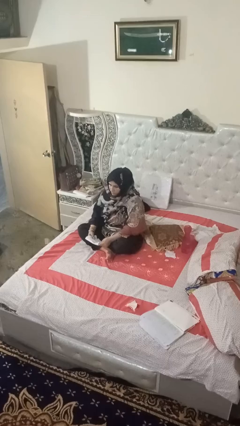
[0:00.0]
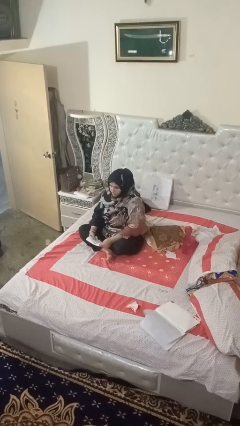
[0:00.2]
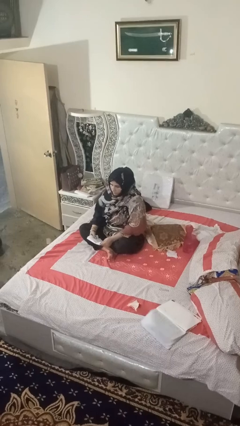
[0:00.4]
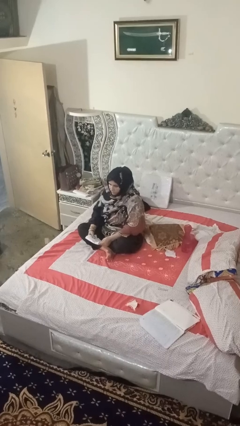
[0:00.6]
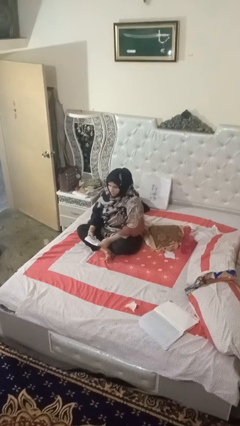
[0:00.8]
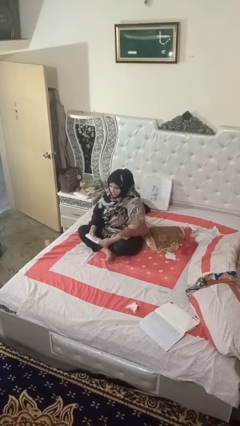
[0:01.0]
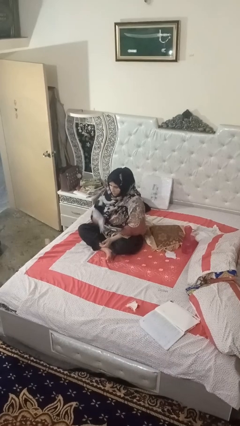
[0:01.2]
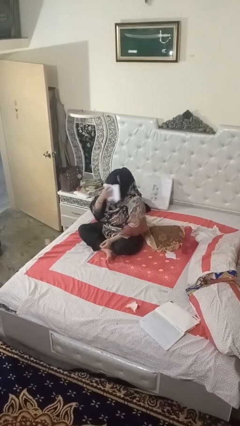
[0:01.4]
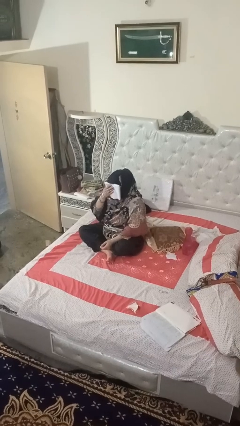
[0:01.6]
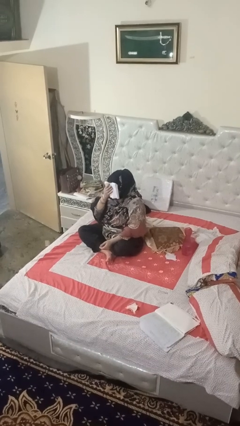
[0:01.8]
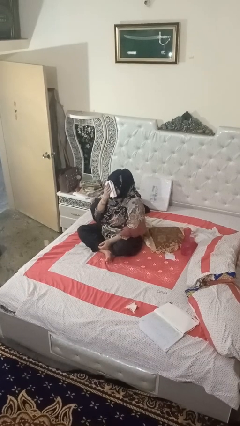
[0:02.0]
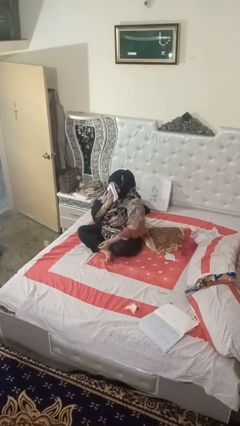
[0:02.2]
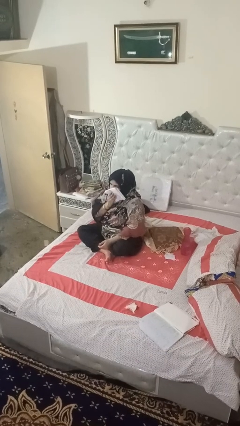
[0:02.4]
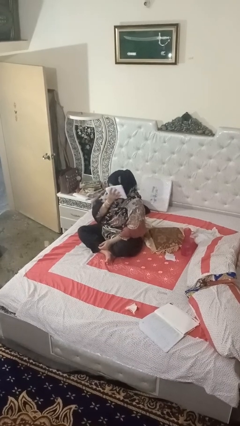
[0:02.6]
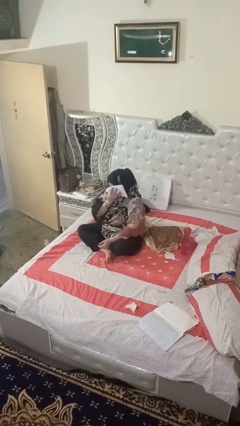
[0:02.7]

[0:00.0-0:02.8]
person wipes mouth with napkin

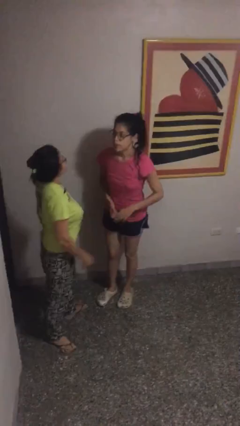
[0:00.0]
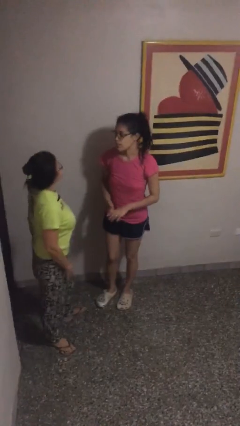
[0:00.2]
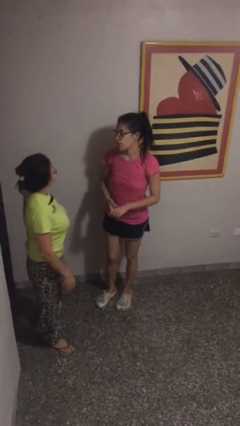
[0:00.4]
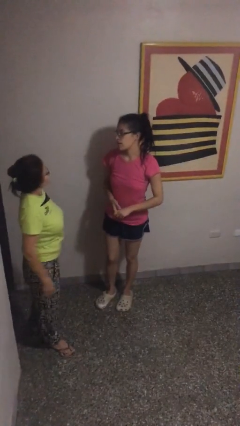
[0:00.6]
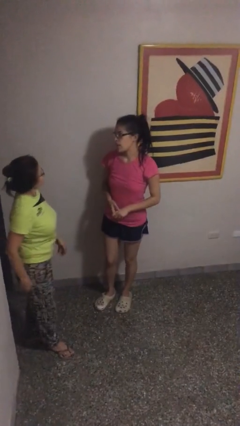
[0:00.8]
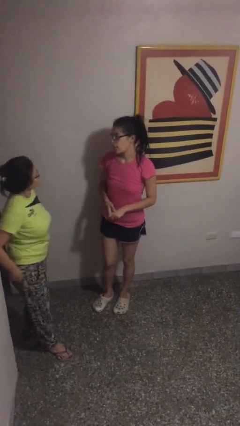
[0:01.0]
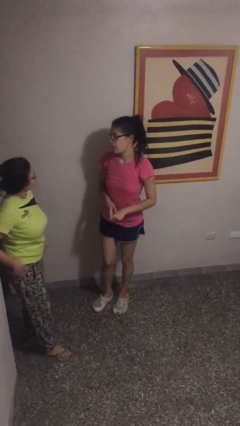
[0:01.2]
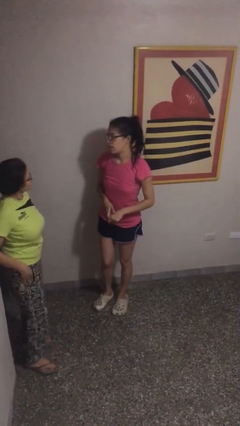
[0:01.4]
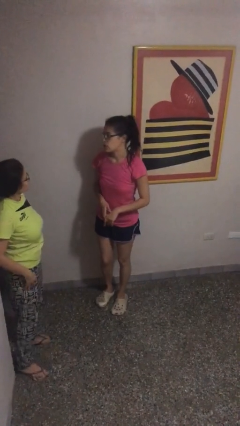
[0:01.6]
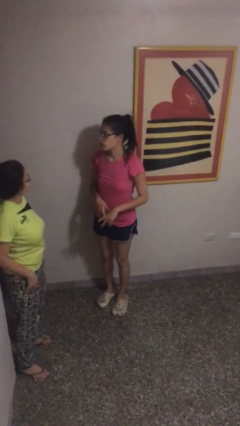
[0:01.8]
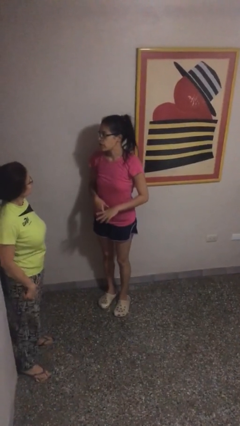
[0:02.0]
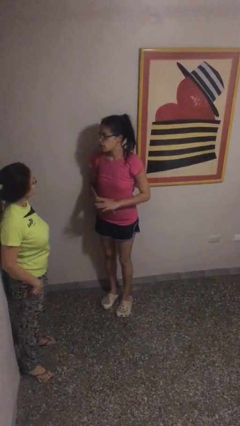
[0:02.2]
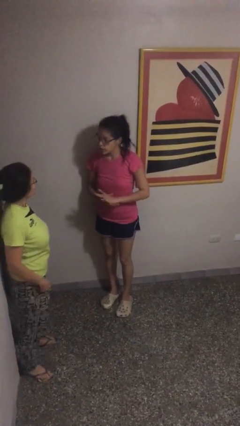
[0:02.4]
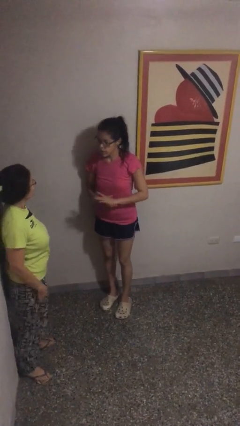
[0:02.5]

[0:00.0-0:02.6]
person talks to person

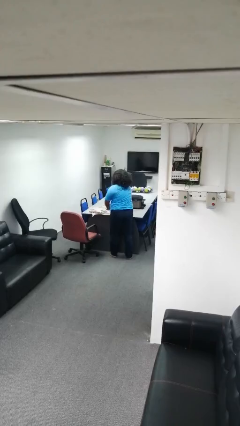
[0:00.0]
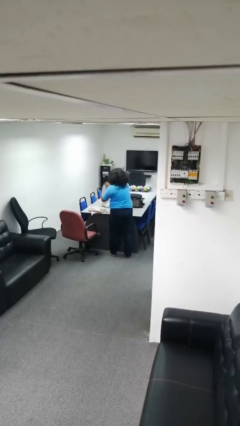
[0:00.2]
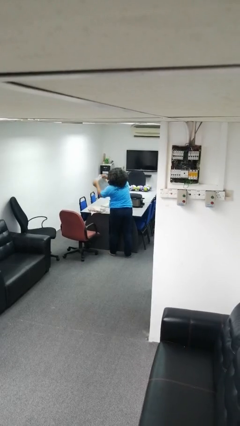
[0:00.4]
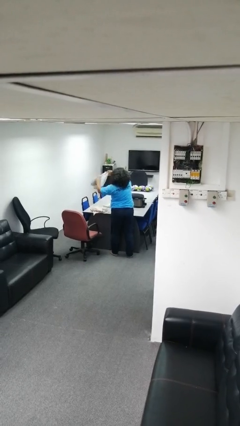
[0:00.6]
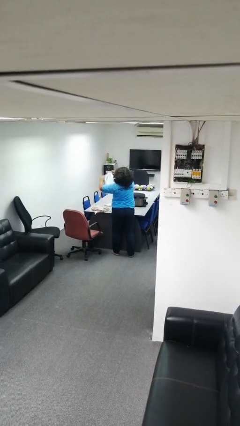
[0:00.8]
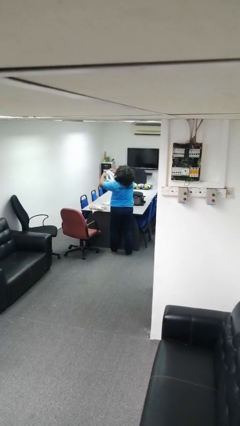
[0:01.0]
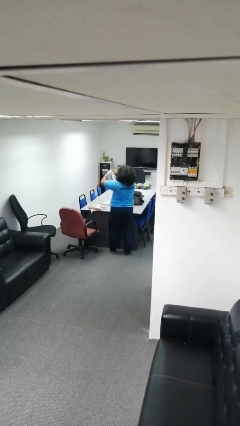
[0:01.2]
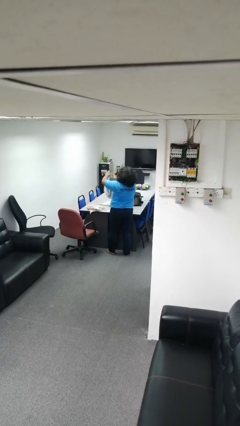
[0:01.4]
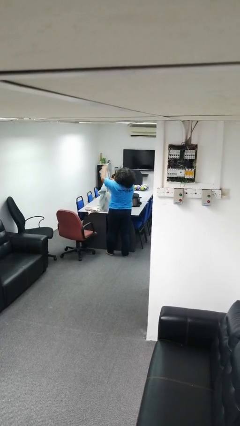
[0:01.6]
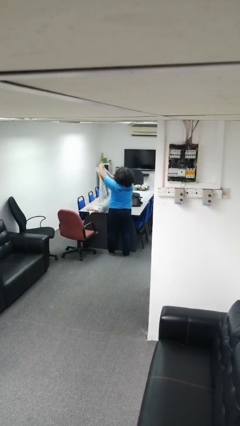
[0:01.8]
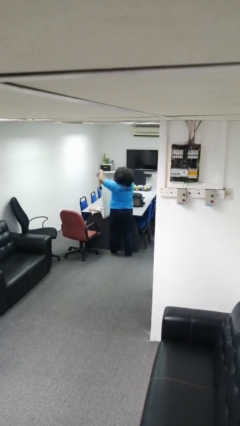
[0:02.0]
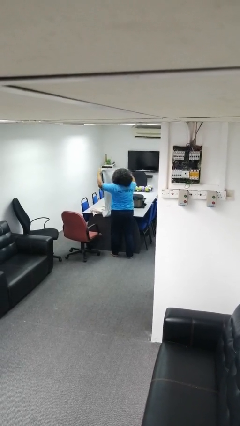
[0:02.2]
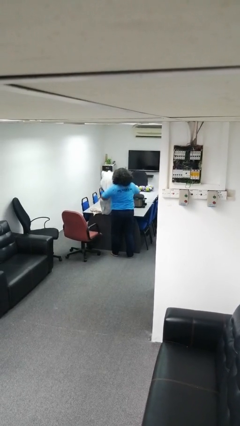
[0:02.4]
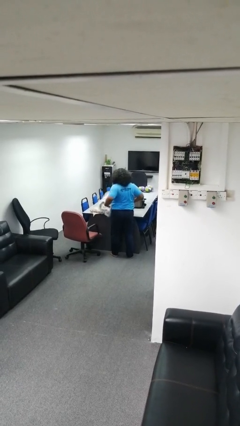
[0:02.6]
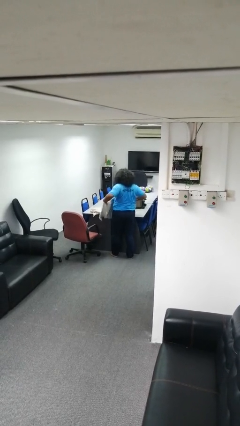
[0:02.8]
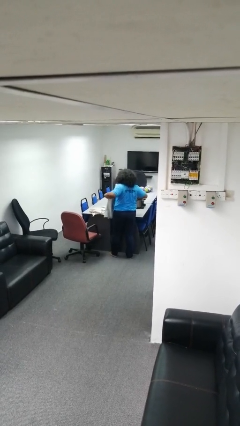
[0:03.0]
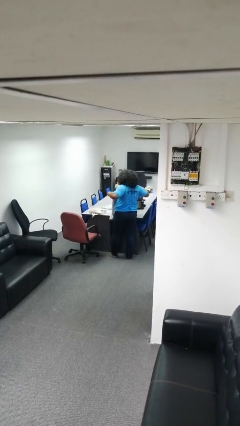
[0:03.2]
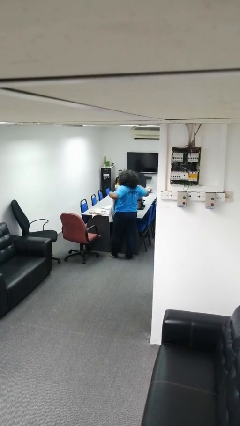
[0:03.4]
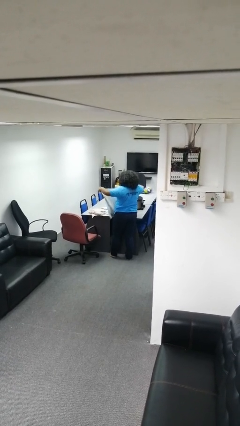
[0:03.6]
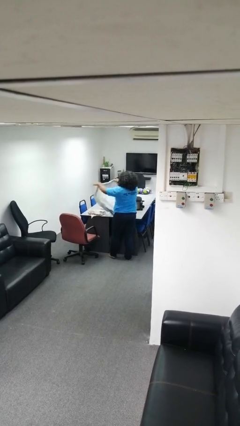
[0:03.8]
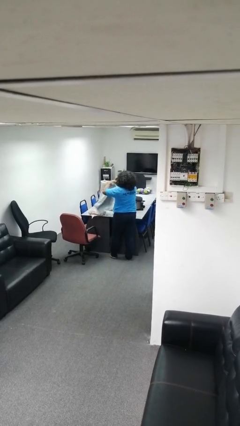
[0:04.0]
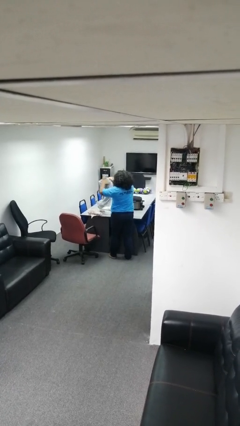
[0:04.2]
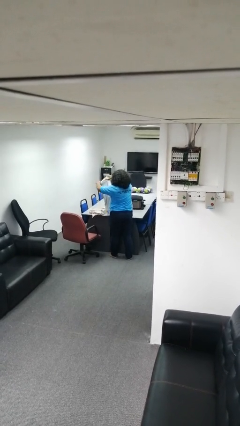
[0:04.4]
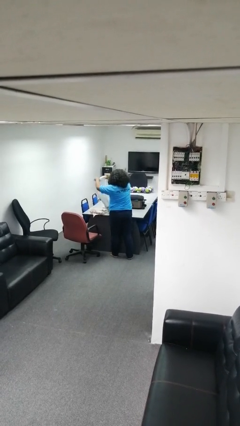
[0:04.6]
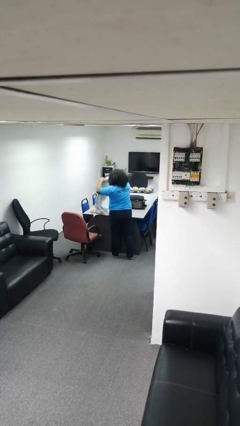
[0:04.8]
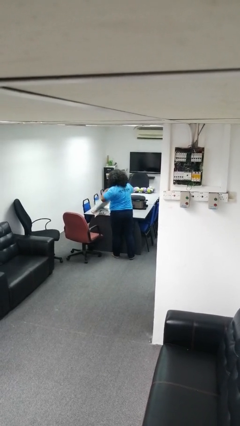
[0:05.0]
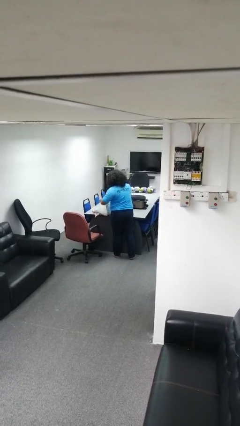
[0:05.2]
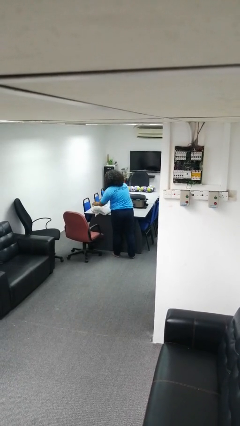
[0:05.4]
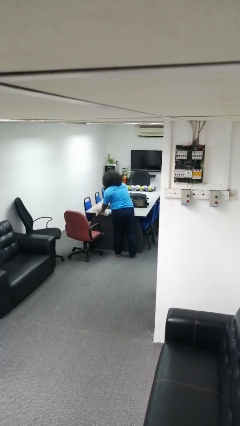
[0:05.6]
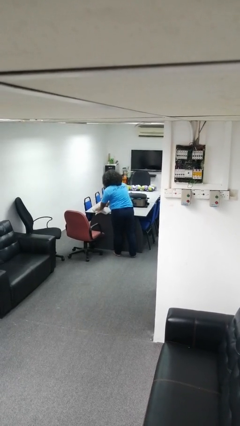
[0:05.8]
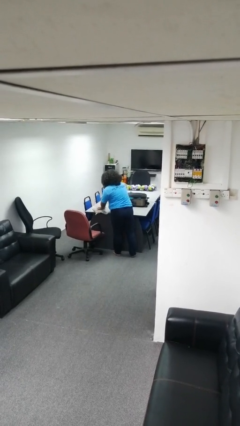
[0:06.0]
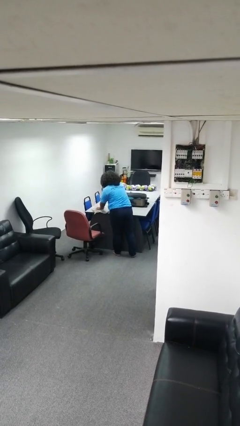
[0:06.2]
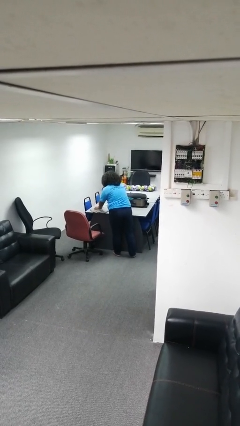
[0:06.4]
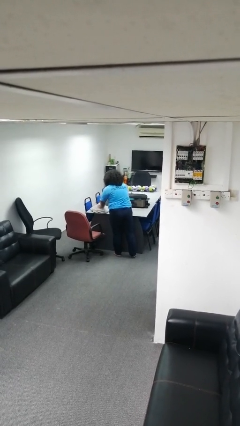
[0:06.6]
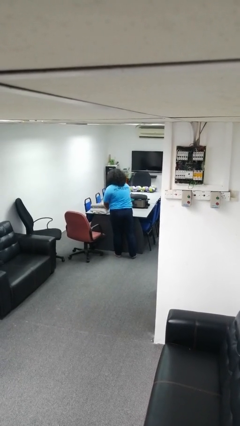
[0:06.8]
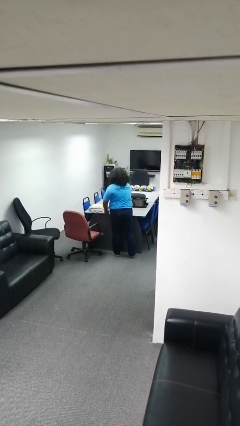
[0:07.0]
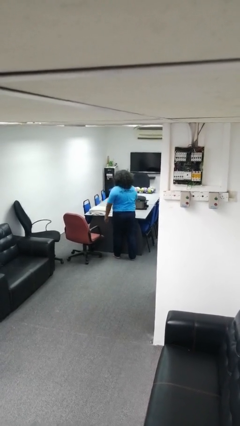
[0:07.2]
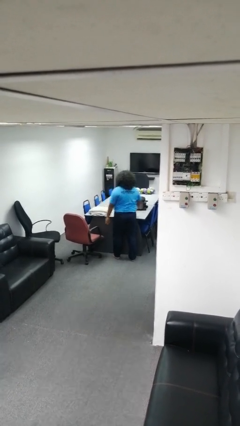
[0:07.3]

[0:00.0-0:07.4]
person folds towel

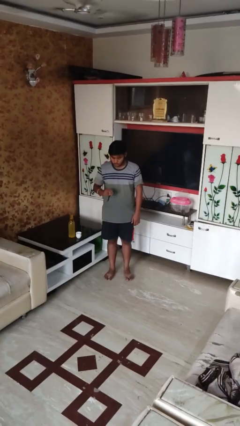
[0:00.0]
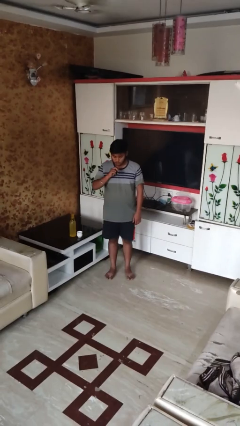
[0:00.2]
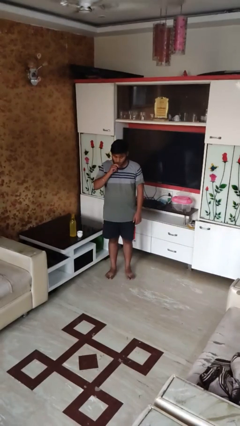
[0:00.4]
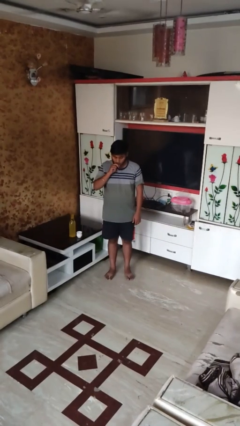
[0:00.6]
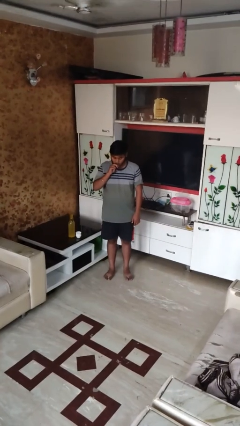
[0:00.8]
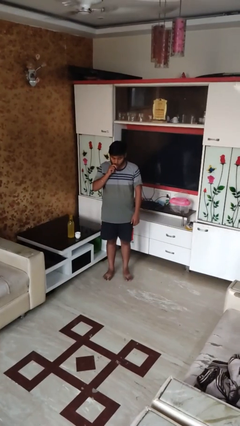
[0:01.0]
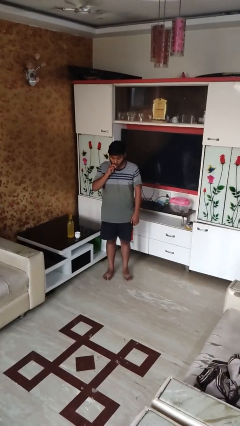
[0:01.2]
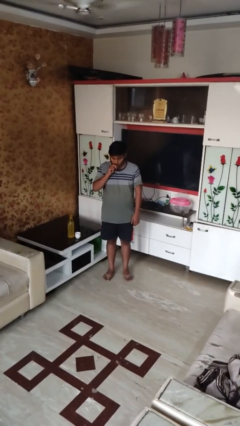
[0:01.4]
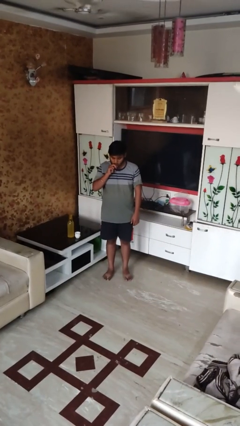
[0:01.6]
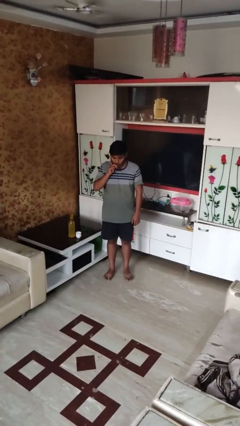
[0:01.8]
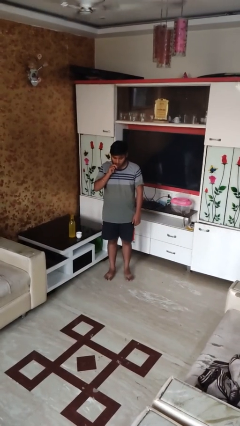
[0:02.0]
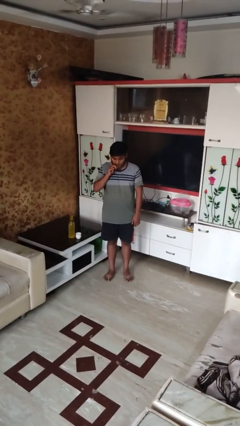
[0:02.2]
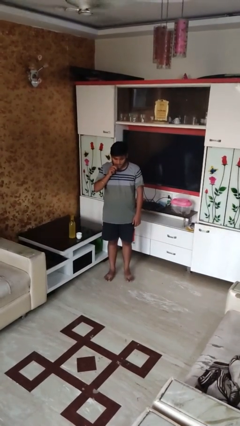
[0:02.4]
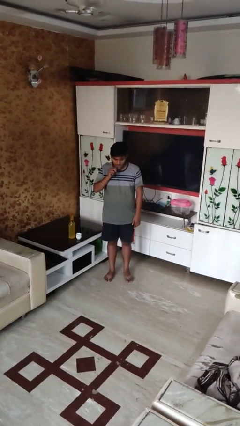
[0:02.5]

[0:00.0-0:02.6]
person vapes

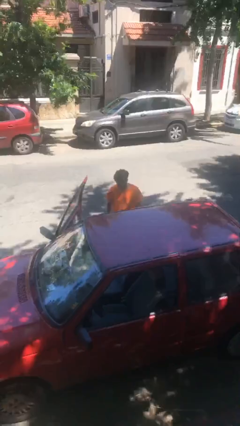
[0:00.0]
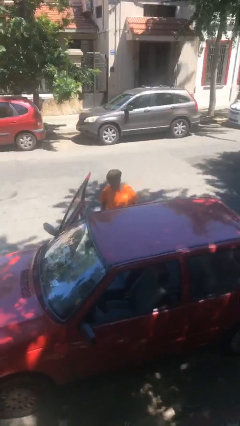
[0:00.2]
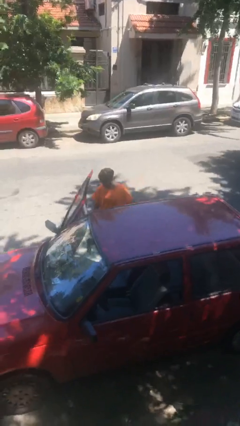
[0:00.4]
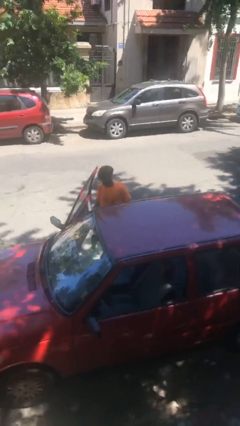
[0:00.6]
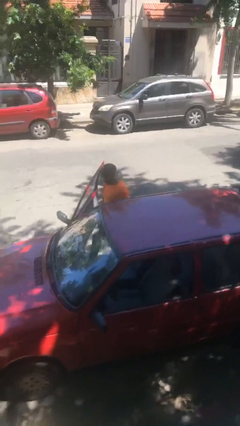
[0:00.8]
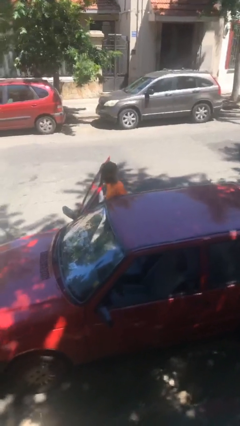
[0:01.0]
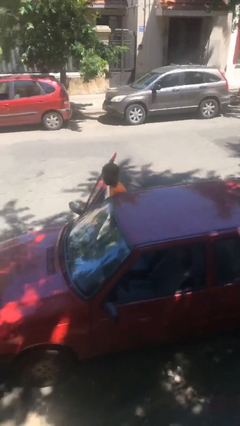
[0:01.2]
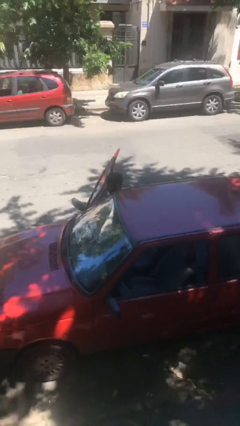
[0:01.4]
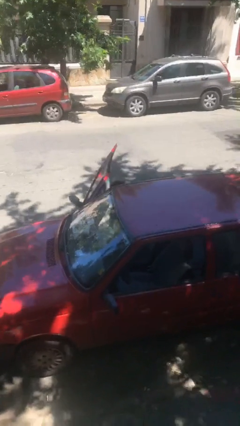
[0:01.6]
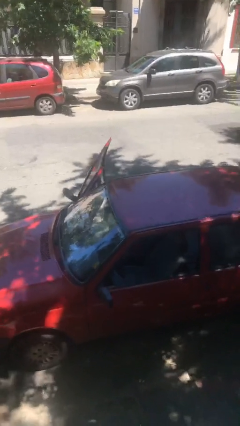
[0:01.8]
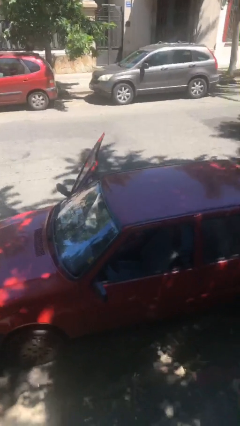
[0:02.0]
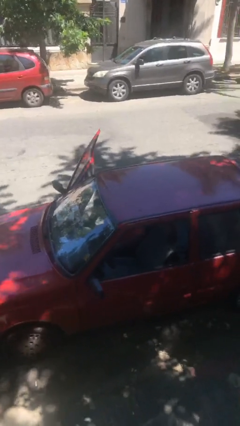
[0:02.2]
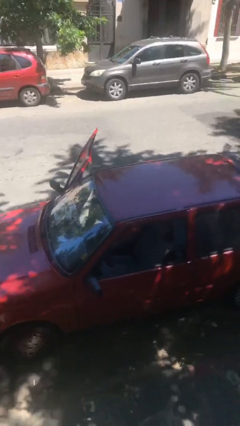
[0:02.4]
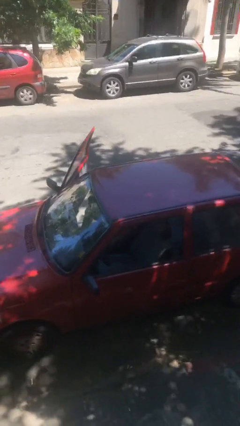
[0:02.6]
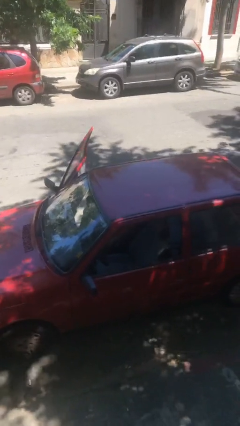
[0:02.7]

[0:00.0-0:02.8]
person enters car
